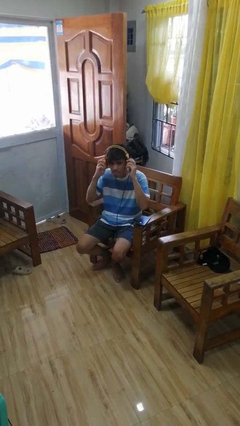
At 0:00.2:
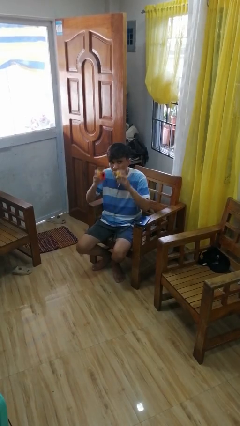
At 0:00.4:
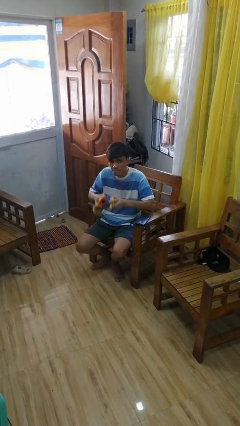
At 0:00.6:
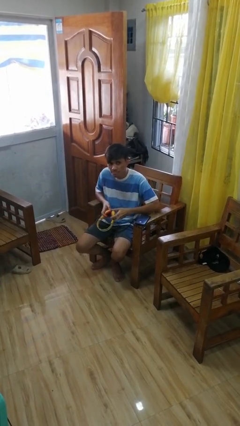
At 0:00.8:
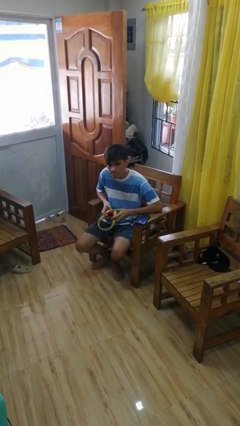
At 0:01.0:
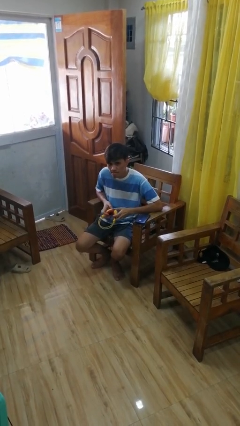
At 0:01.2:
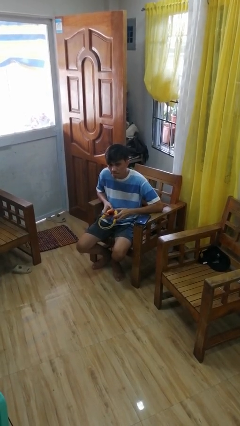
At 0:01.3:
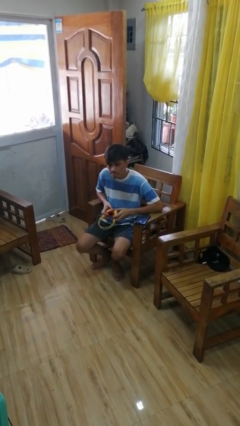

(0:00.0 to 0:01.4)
person takes off headphones

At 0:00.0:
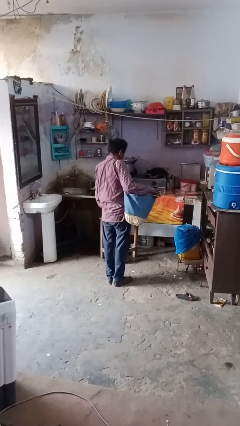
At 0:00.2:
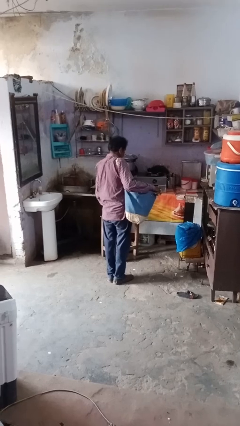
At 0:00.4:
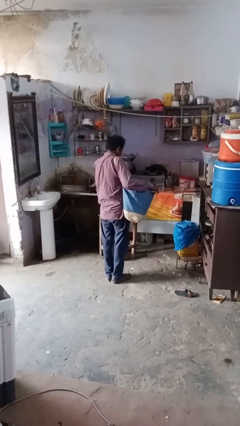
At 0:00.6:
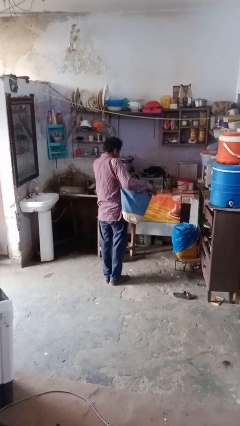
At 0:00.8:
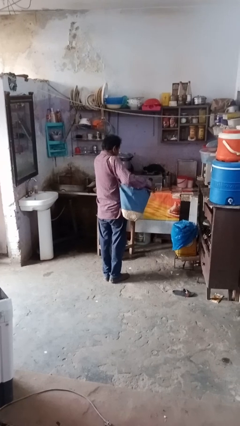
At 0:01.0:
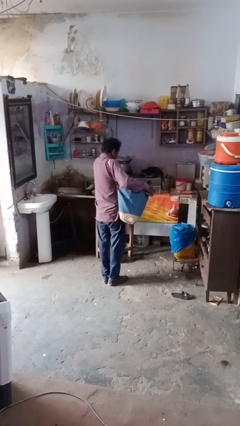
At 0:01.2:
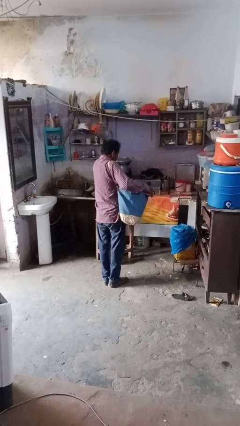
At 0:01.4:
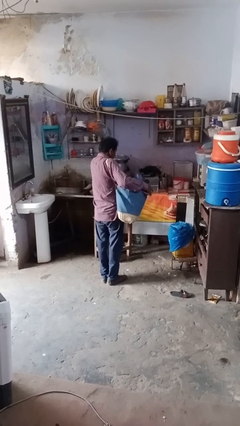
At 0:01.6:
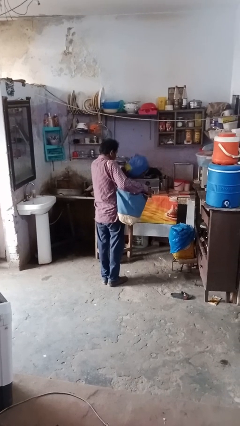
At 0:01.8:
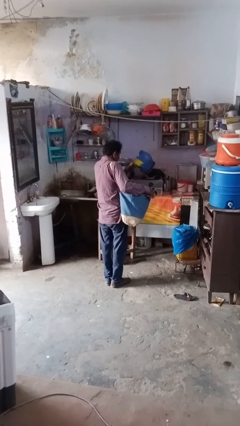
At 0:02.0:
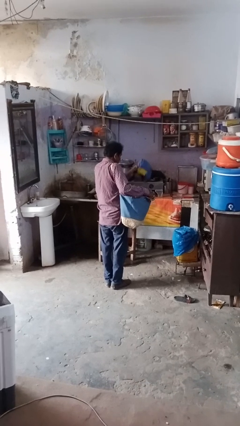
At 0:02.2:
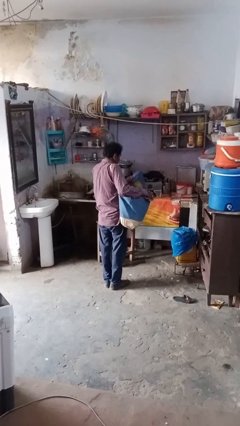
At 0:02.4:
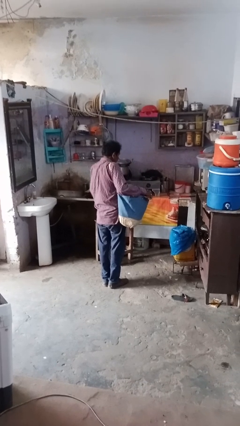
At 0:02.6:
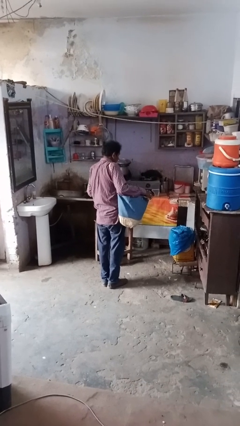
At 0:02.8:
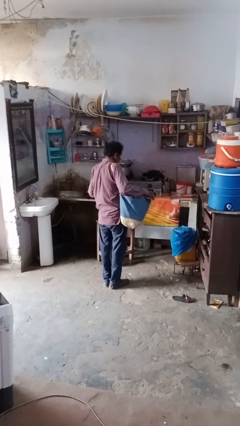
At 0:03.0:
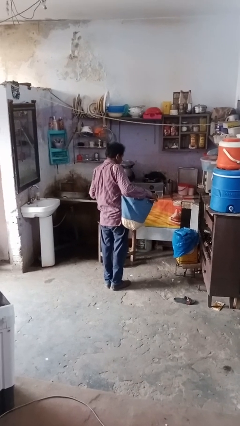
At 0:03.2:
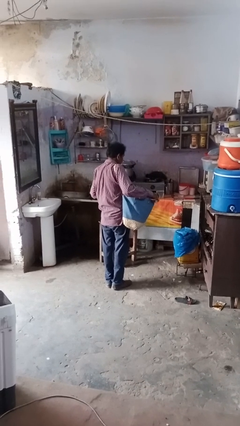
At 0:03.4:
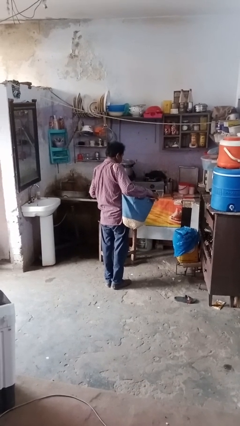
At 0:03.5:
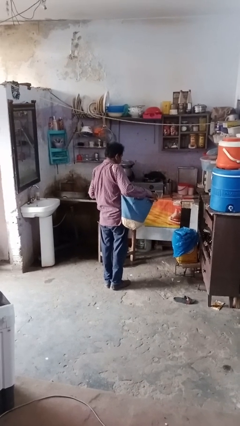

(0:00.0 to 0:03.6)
person takes object from bag

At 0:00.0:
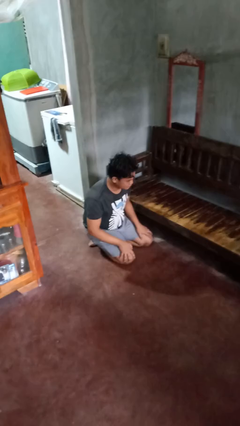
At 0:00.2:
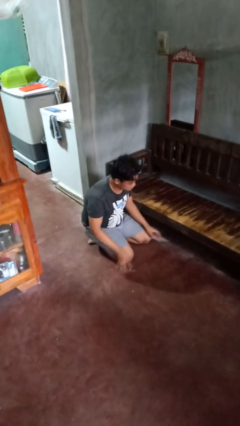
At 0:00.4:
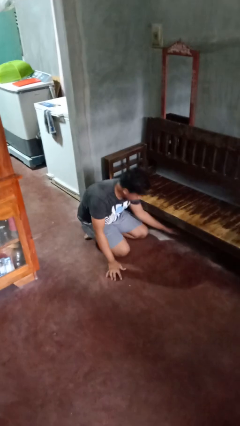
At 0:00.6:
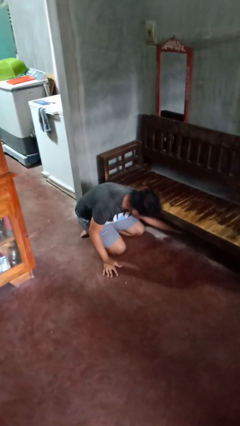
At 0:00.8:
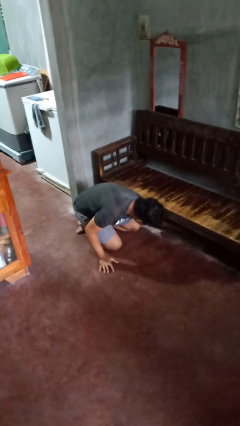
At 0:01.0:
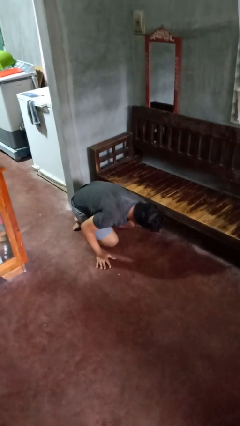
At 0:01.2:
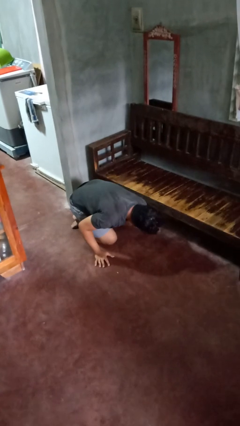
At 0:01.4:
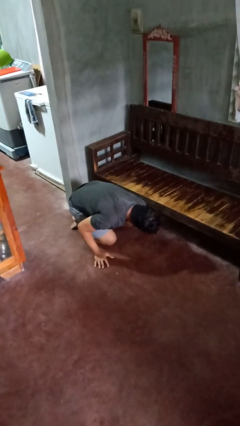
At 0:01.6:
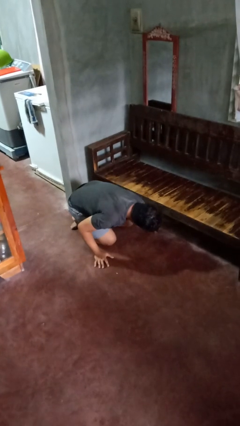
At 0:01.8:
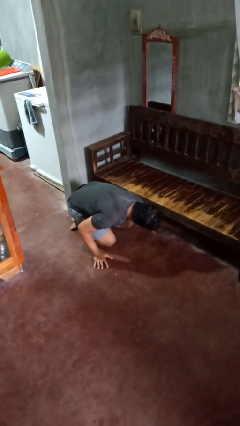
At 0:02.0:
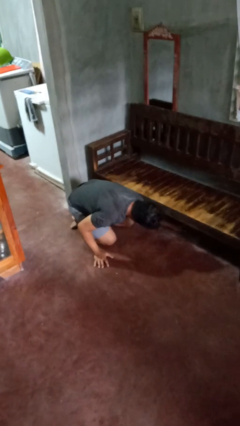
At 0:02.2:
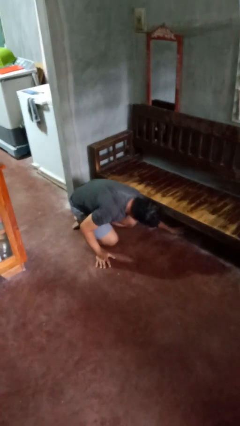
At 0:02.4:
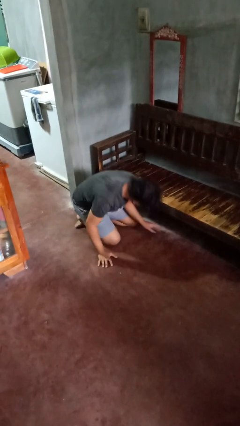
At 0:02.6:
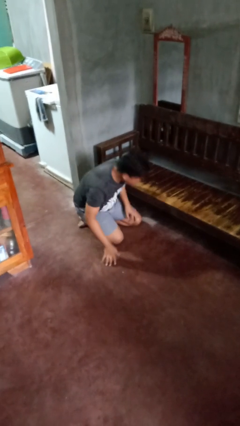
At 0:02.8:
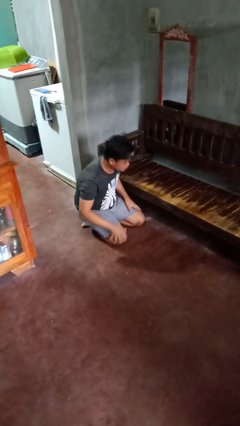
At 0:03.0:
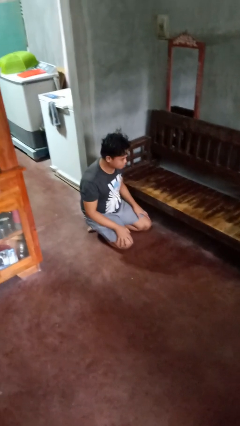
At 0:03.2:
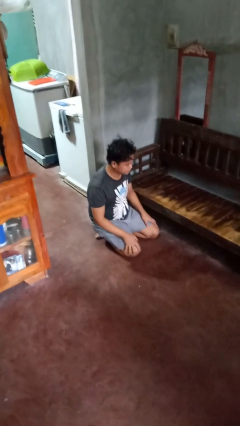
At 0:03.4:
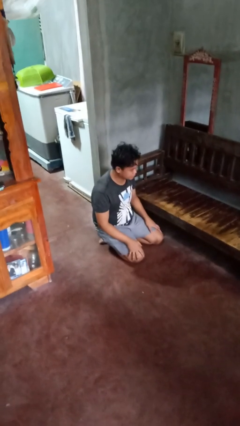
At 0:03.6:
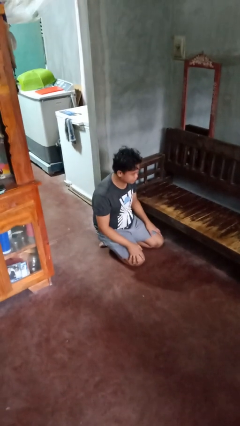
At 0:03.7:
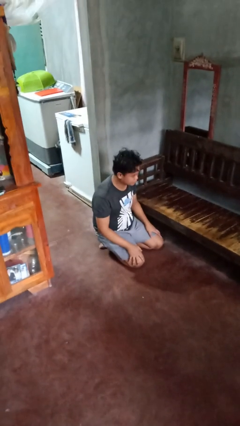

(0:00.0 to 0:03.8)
person searches under couch

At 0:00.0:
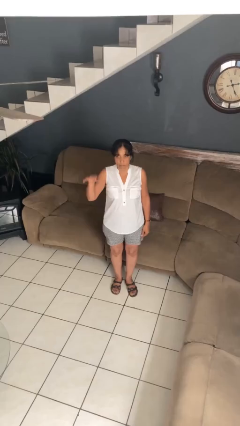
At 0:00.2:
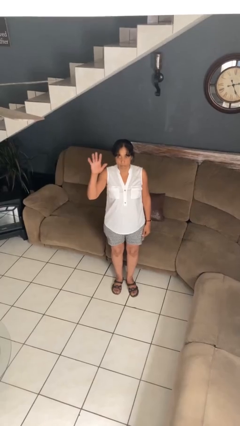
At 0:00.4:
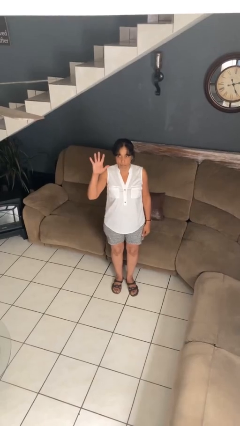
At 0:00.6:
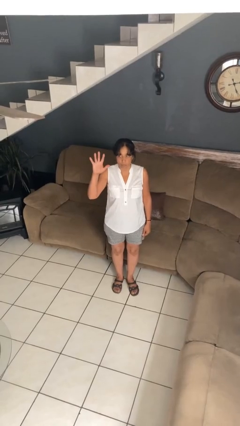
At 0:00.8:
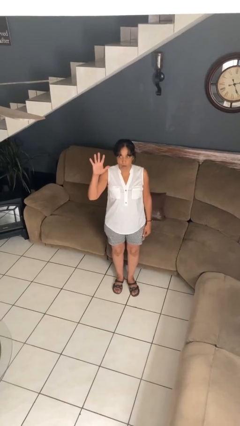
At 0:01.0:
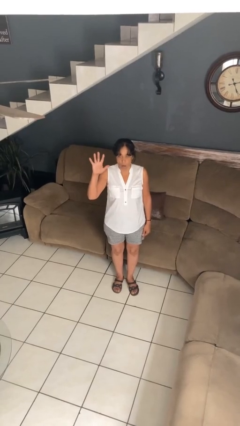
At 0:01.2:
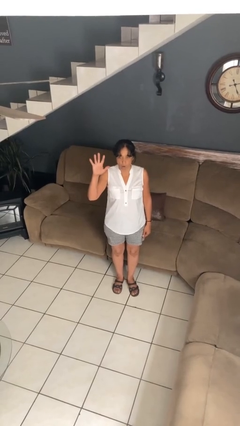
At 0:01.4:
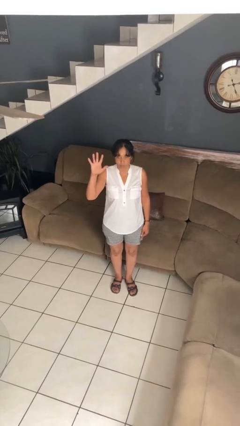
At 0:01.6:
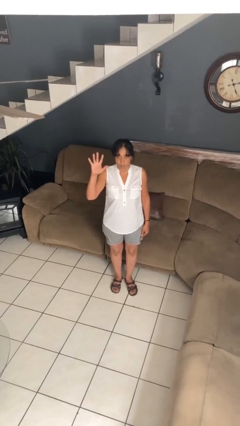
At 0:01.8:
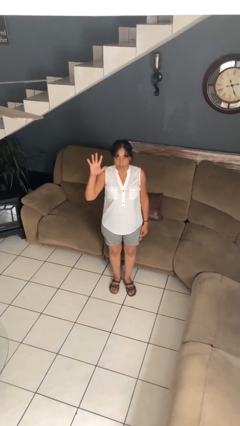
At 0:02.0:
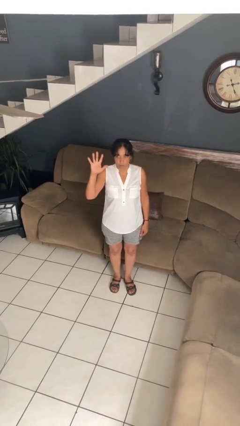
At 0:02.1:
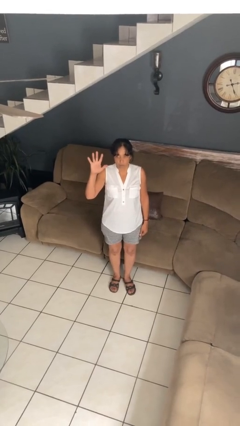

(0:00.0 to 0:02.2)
person gestures number five

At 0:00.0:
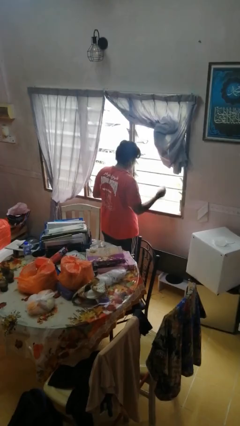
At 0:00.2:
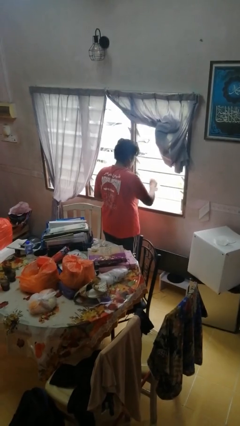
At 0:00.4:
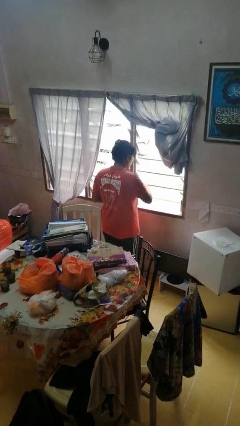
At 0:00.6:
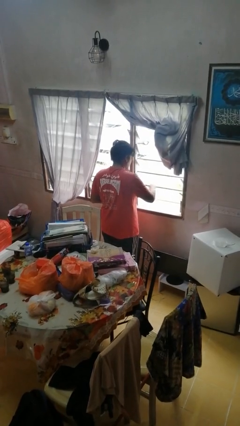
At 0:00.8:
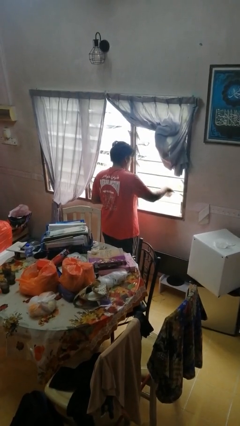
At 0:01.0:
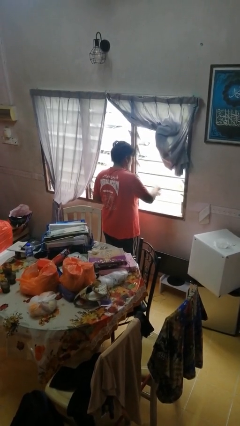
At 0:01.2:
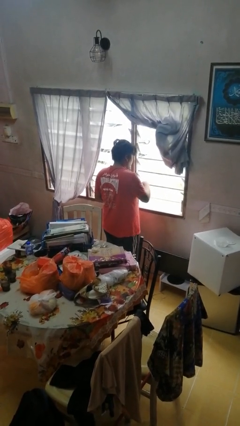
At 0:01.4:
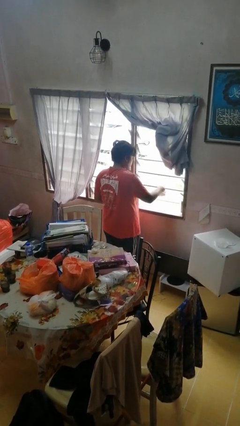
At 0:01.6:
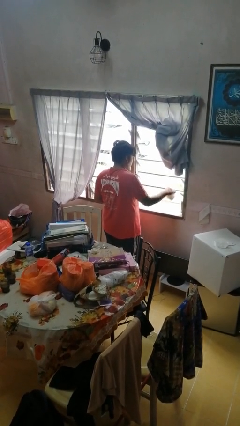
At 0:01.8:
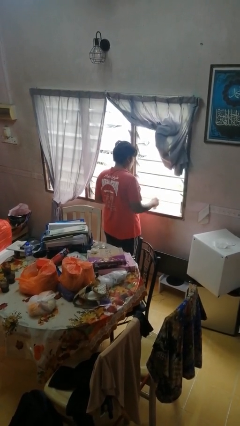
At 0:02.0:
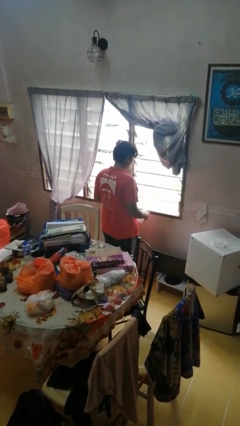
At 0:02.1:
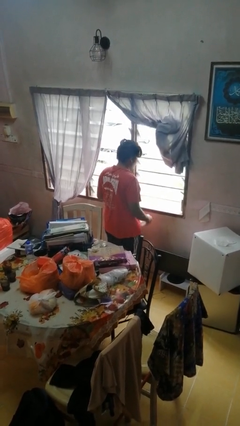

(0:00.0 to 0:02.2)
person washes window

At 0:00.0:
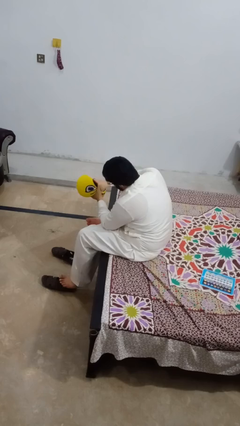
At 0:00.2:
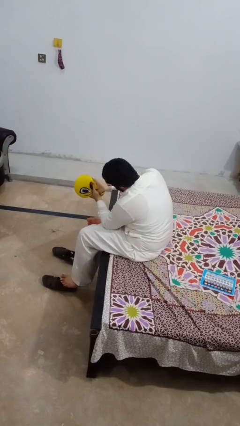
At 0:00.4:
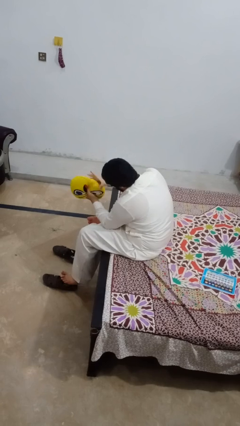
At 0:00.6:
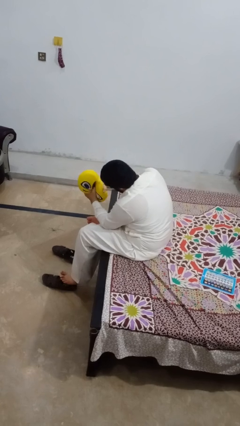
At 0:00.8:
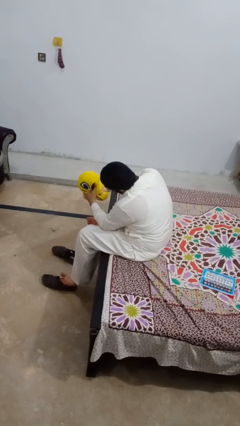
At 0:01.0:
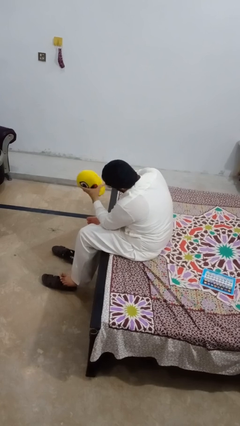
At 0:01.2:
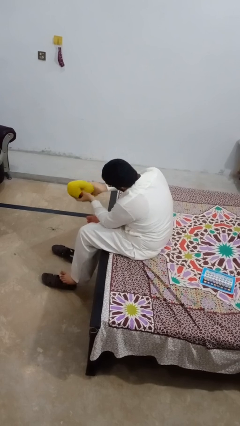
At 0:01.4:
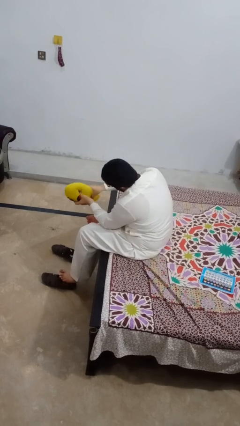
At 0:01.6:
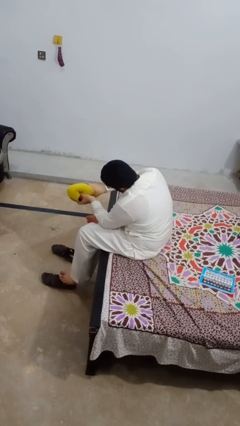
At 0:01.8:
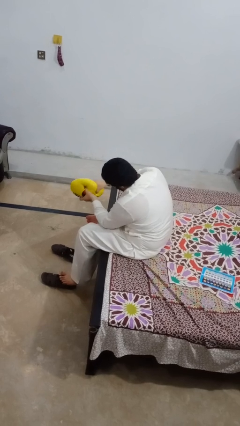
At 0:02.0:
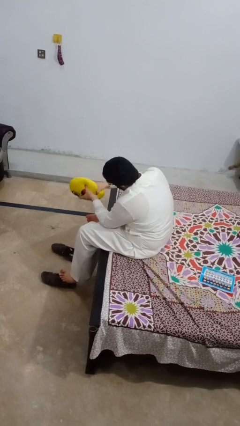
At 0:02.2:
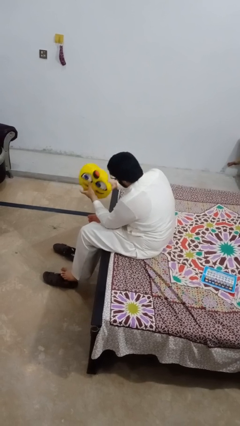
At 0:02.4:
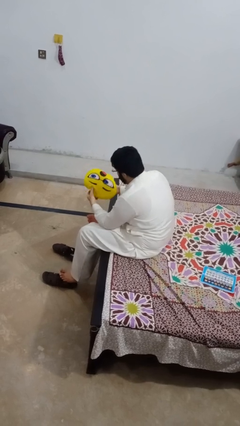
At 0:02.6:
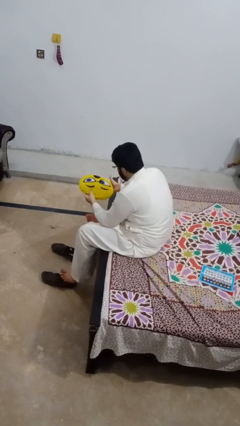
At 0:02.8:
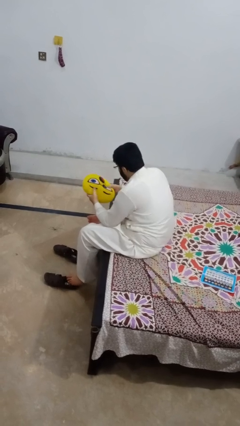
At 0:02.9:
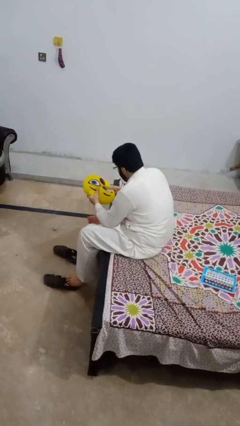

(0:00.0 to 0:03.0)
person squeezes object

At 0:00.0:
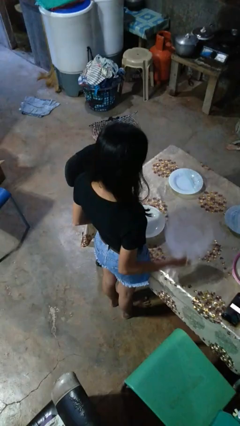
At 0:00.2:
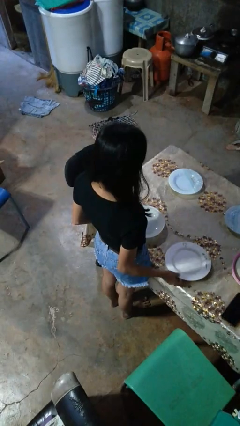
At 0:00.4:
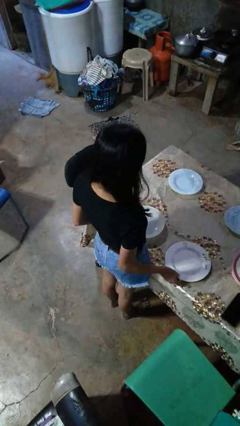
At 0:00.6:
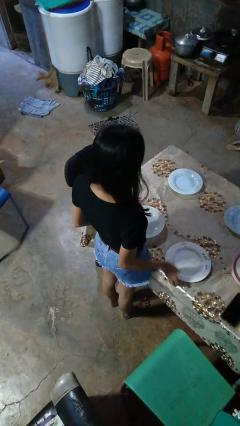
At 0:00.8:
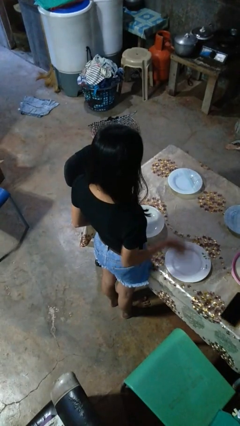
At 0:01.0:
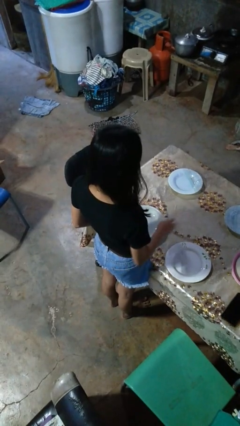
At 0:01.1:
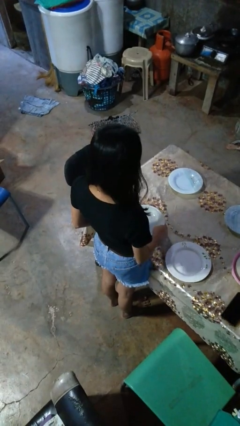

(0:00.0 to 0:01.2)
person sets table
